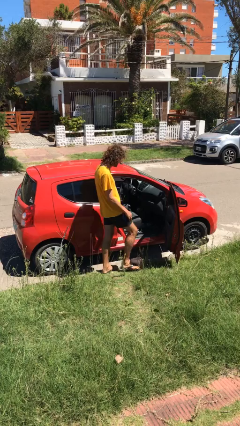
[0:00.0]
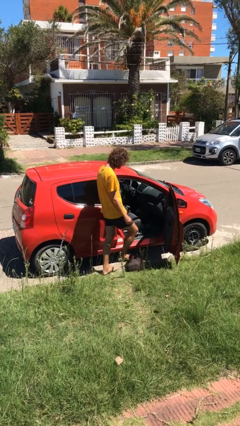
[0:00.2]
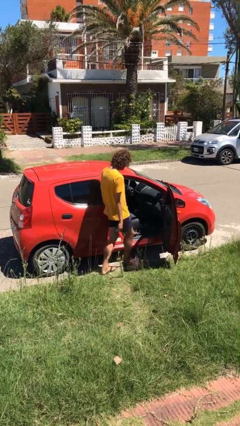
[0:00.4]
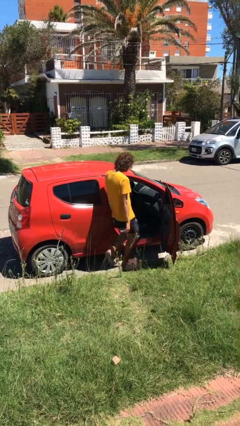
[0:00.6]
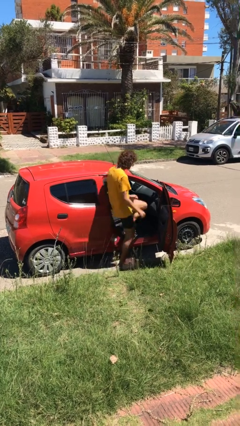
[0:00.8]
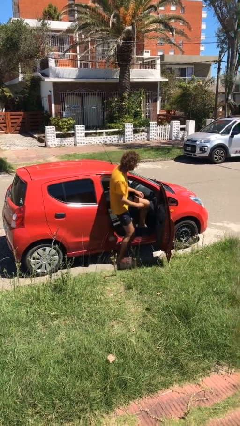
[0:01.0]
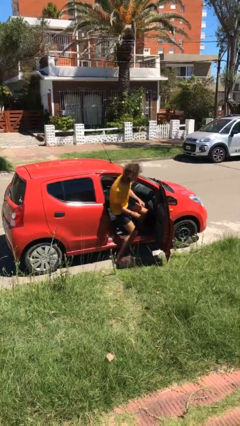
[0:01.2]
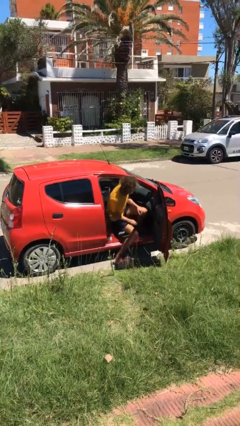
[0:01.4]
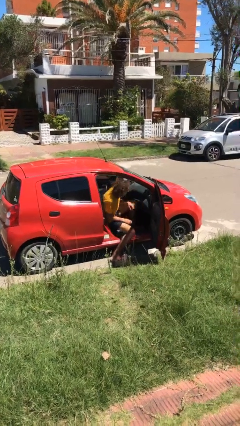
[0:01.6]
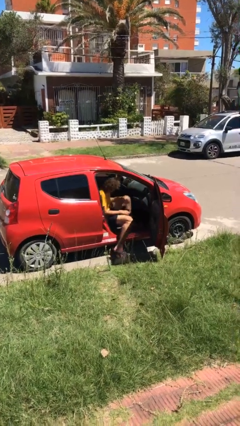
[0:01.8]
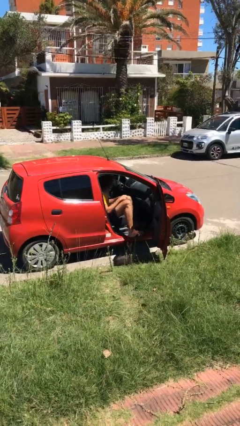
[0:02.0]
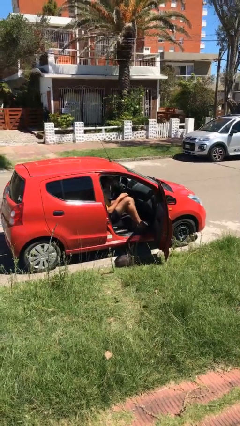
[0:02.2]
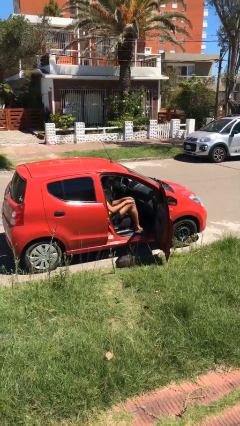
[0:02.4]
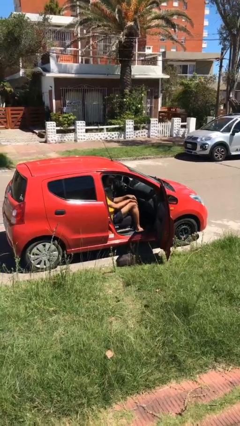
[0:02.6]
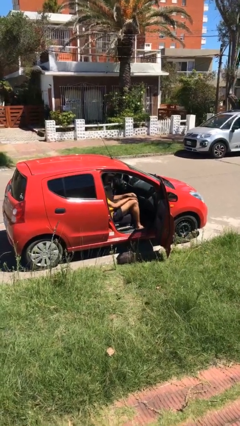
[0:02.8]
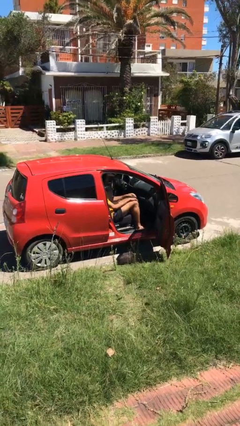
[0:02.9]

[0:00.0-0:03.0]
person enters car

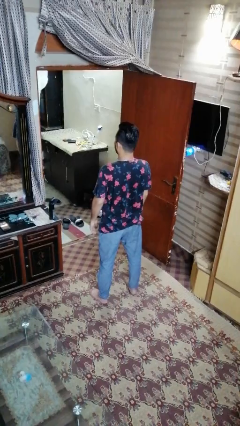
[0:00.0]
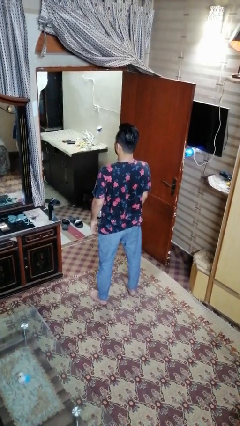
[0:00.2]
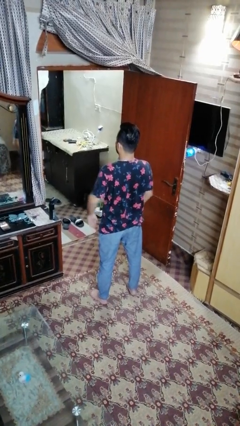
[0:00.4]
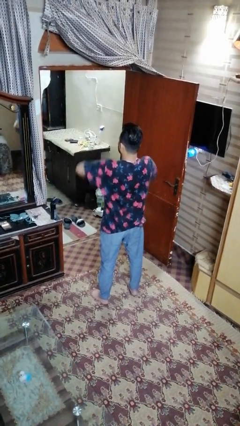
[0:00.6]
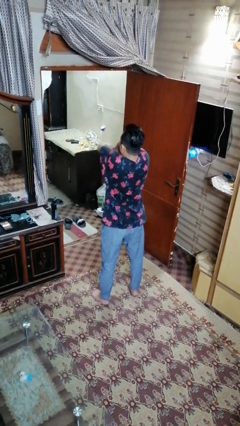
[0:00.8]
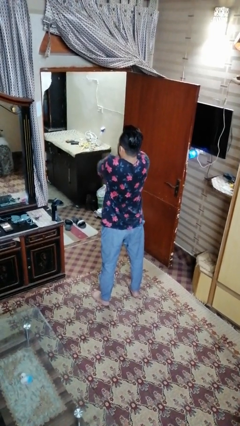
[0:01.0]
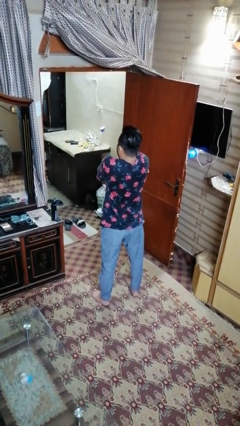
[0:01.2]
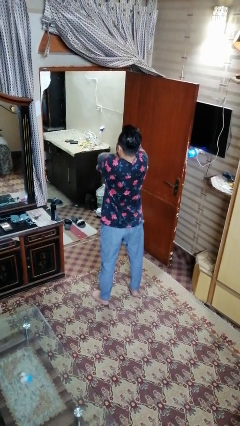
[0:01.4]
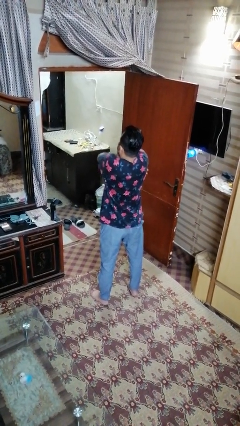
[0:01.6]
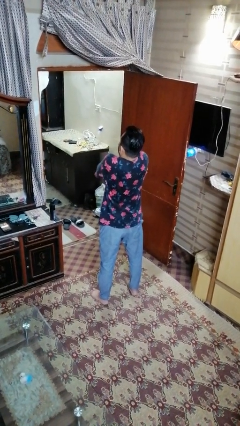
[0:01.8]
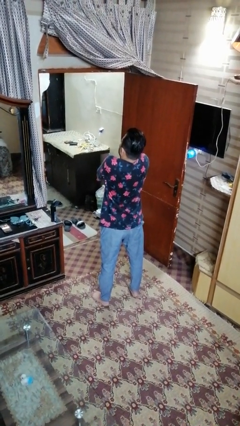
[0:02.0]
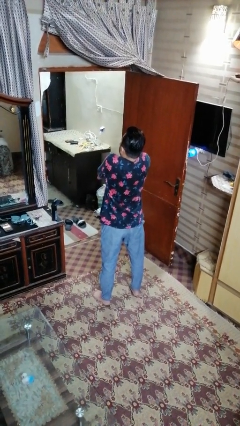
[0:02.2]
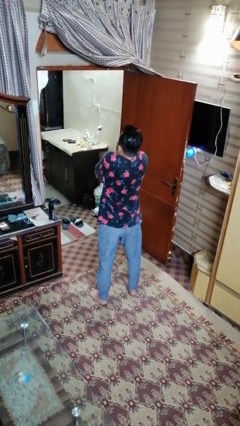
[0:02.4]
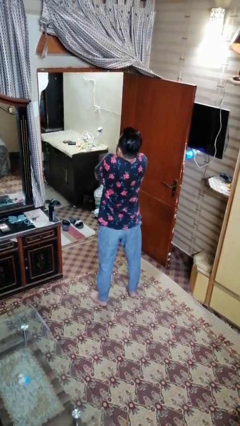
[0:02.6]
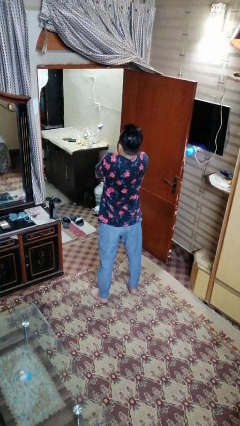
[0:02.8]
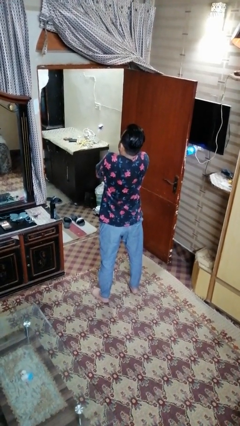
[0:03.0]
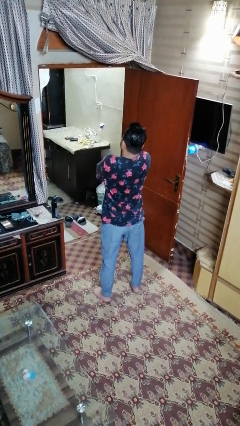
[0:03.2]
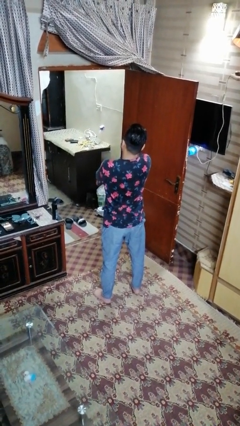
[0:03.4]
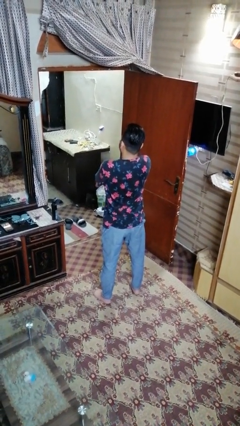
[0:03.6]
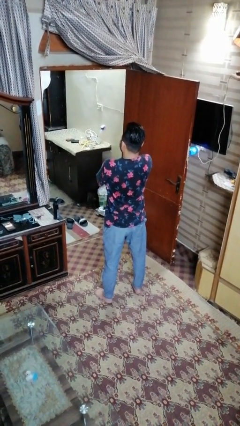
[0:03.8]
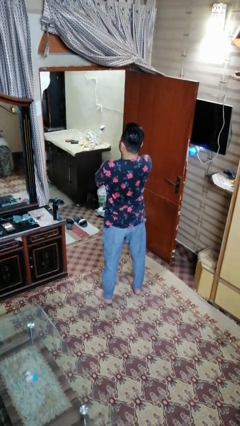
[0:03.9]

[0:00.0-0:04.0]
person blows into hands

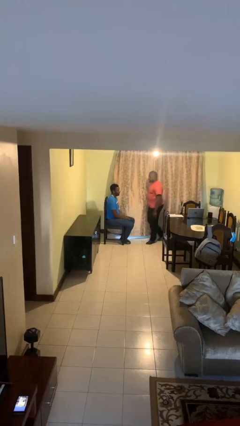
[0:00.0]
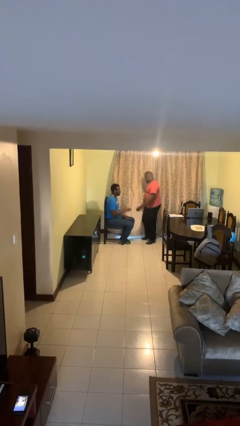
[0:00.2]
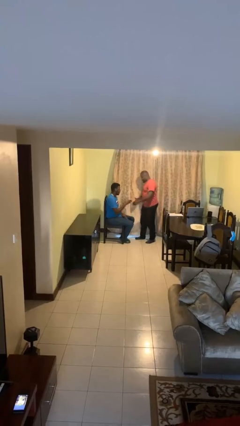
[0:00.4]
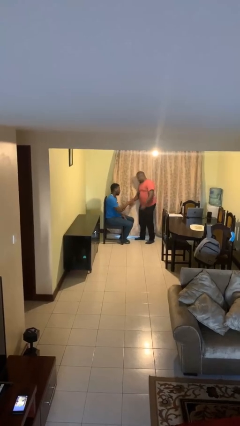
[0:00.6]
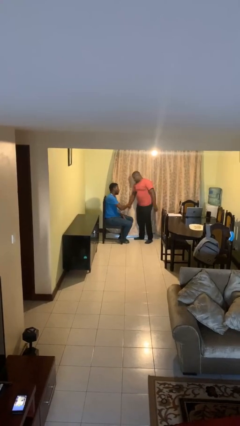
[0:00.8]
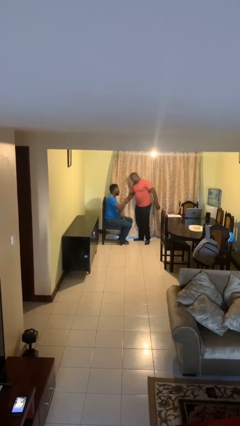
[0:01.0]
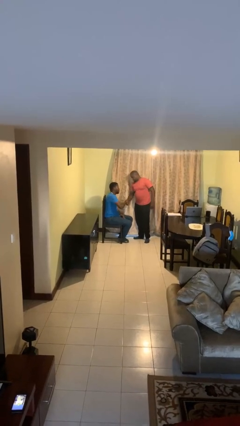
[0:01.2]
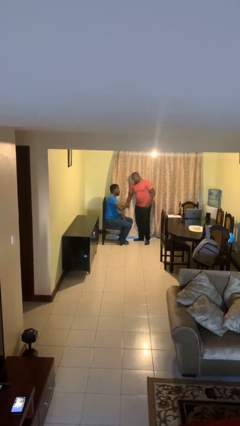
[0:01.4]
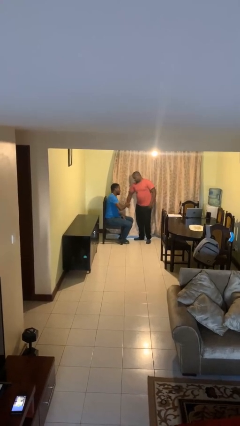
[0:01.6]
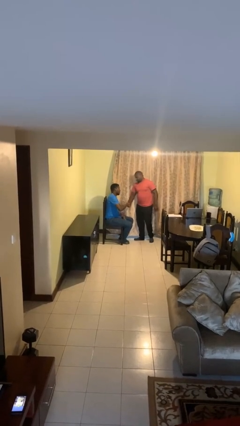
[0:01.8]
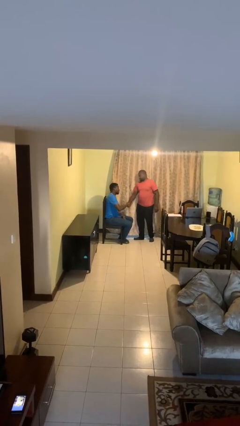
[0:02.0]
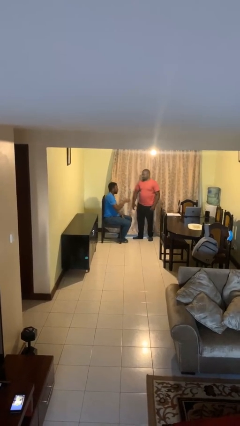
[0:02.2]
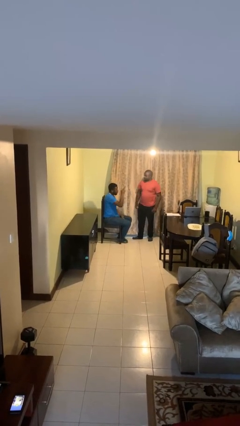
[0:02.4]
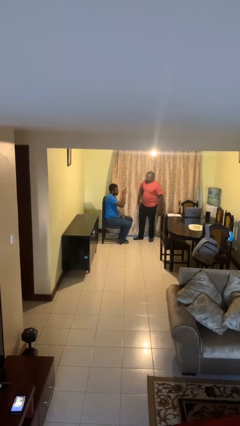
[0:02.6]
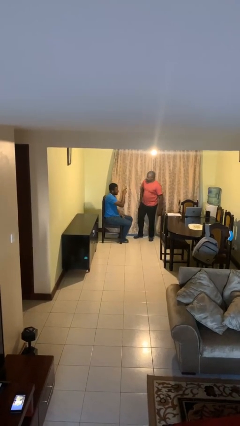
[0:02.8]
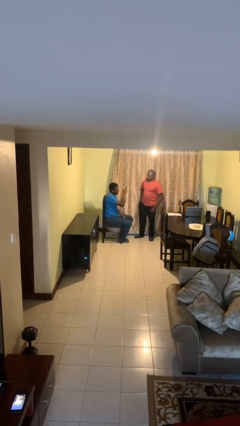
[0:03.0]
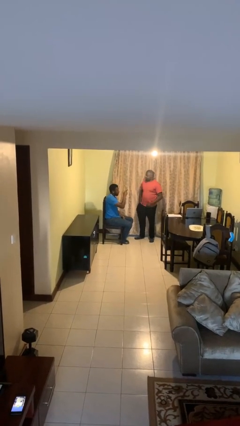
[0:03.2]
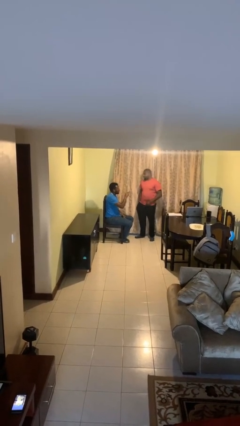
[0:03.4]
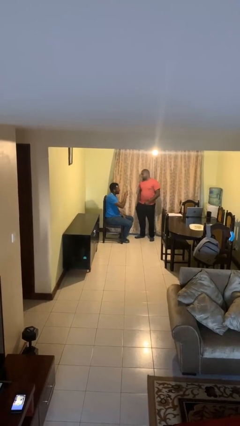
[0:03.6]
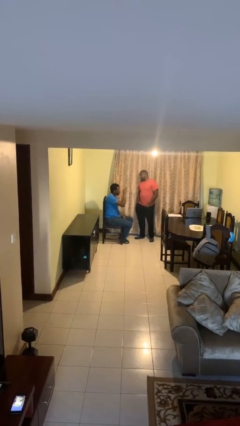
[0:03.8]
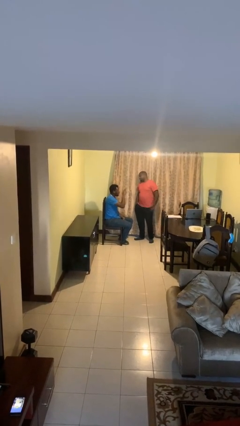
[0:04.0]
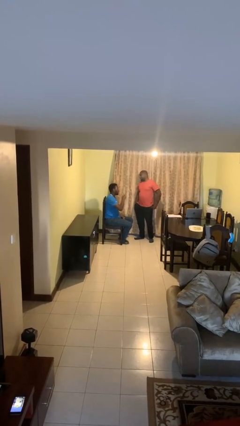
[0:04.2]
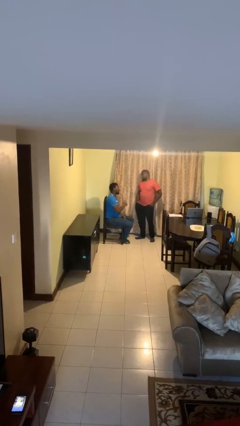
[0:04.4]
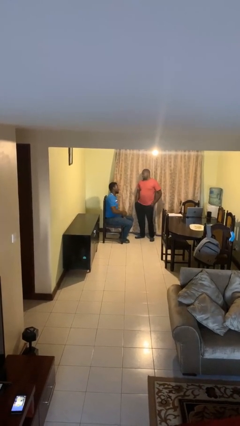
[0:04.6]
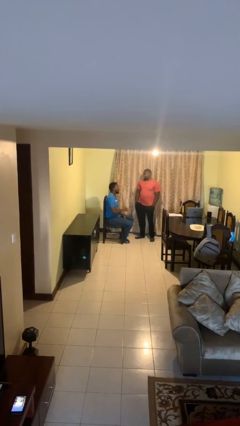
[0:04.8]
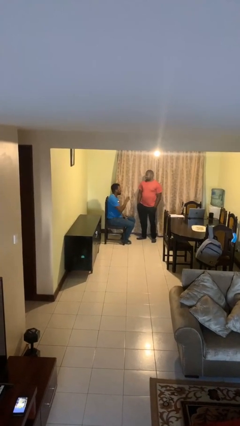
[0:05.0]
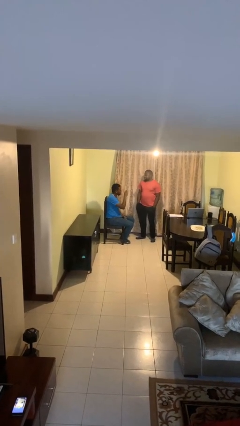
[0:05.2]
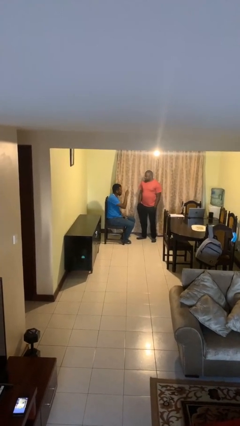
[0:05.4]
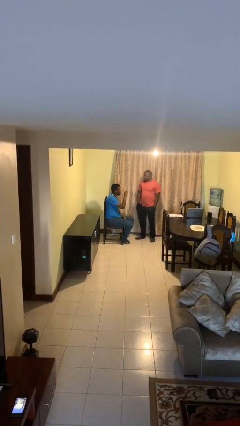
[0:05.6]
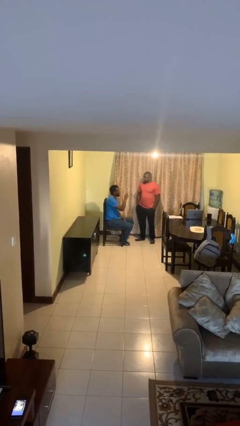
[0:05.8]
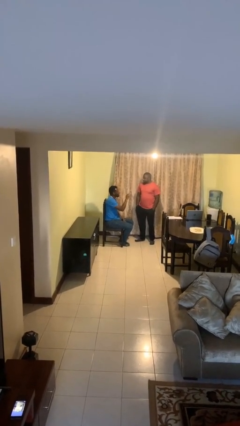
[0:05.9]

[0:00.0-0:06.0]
person shakes hand

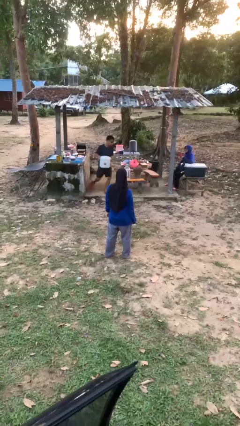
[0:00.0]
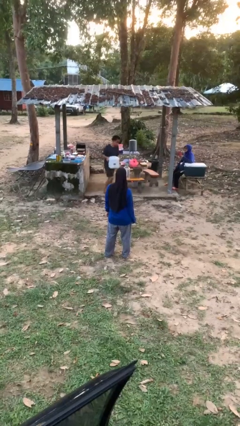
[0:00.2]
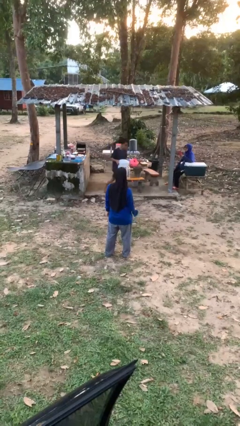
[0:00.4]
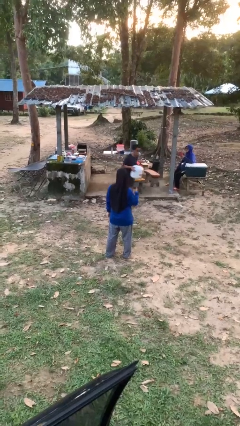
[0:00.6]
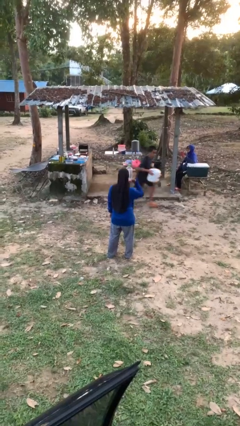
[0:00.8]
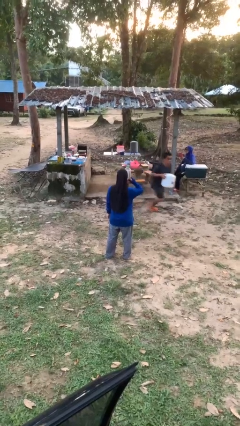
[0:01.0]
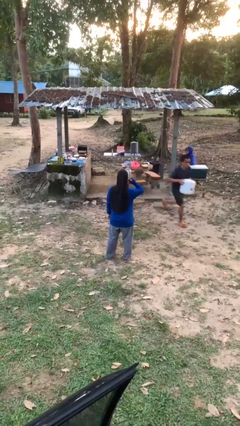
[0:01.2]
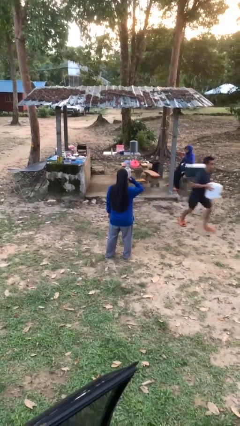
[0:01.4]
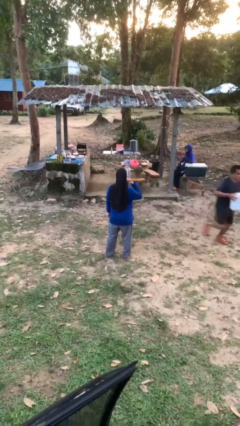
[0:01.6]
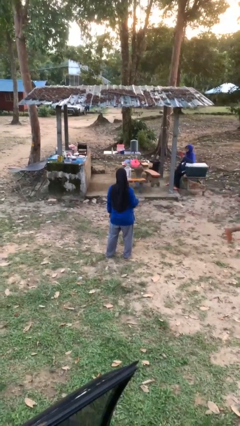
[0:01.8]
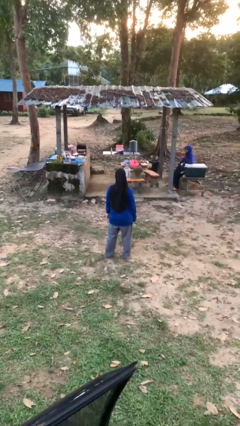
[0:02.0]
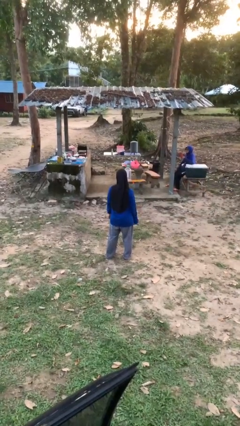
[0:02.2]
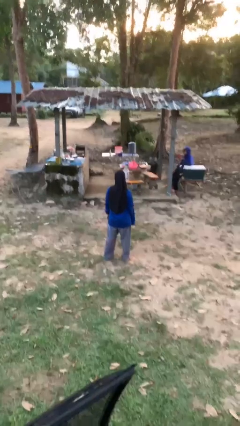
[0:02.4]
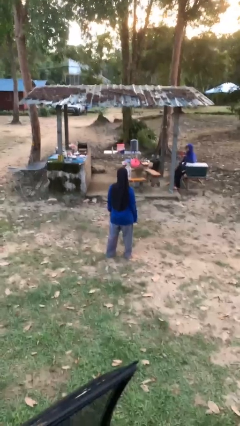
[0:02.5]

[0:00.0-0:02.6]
person gestures call me

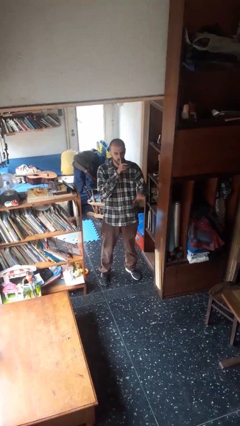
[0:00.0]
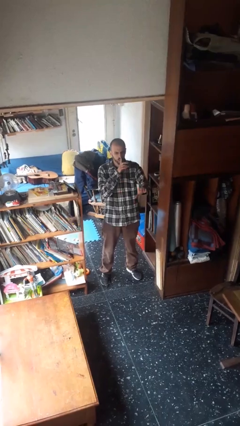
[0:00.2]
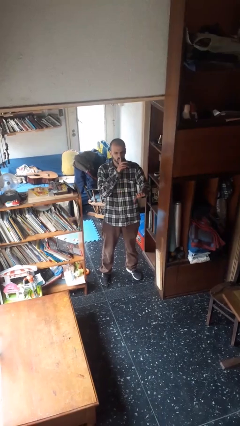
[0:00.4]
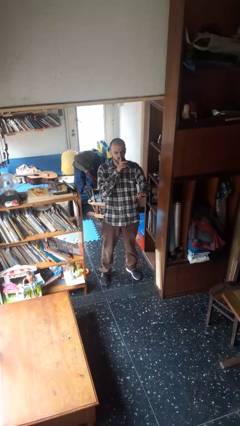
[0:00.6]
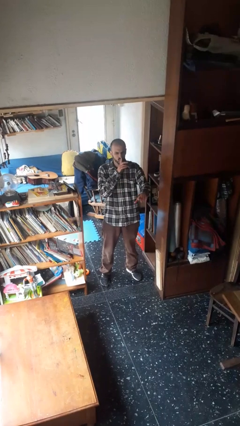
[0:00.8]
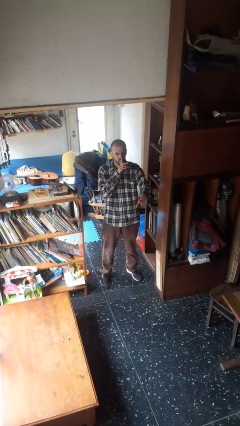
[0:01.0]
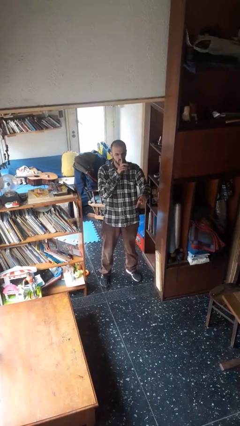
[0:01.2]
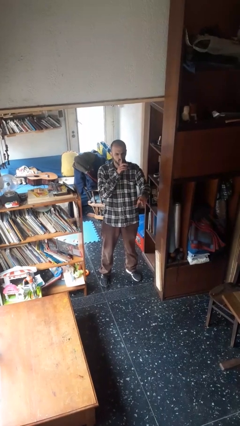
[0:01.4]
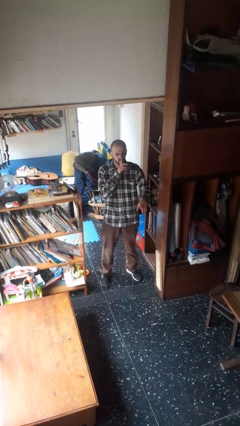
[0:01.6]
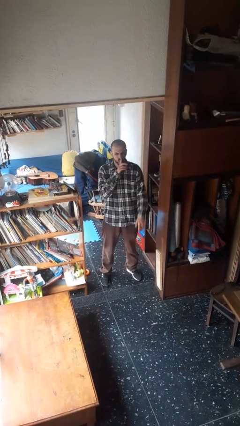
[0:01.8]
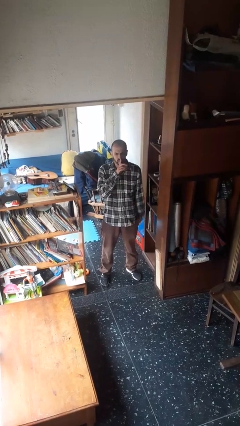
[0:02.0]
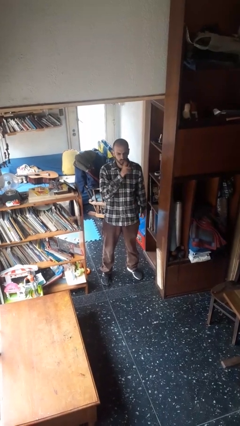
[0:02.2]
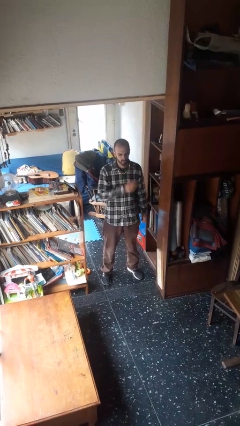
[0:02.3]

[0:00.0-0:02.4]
person gestures be quiet
